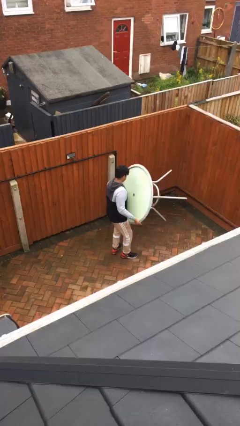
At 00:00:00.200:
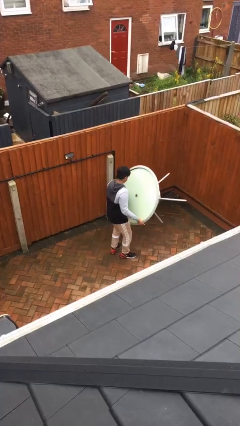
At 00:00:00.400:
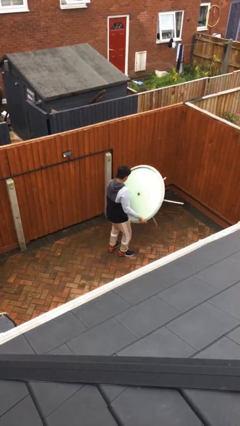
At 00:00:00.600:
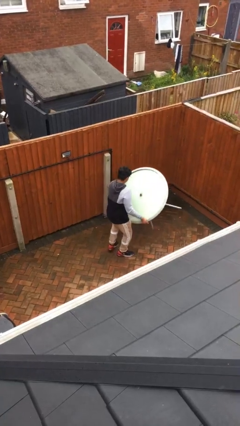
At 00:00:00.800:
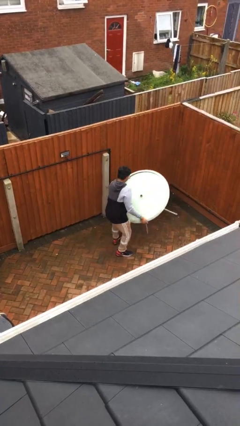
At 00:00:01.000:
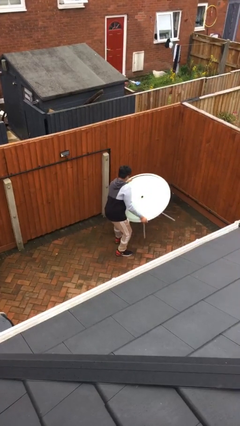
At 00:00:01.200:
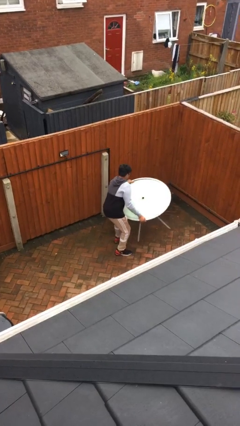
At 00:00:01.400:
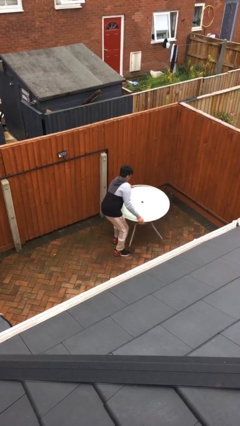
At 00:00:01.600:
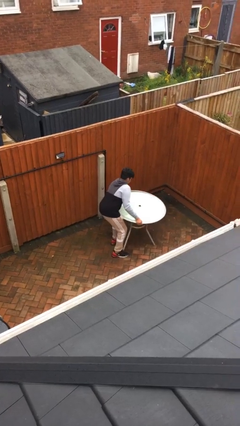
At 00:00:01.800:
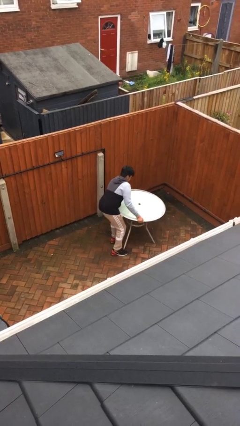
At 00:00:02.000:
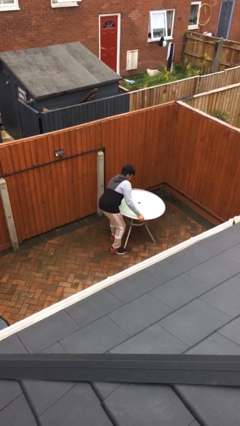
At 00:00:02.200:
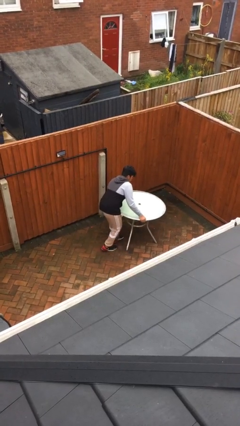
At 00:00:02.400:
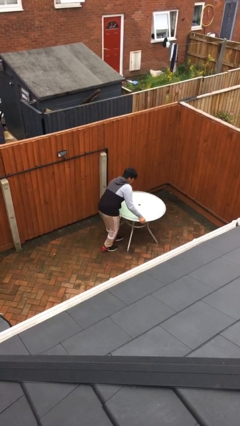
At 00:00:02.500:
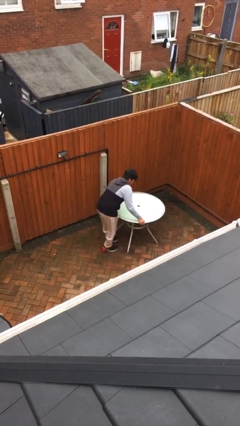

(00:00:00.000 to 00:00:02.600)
person puts down object on floor

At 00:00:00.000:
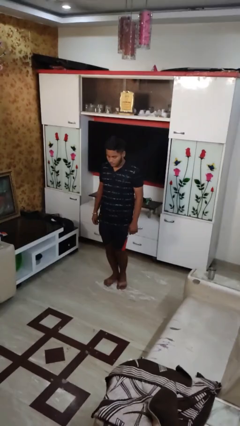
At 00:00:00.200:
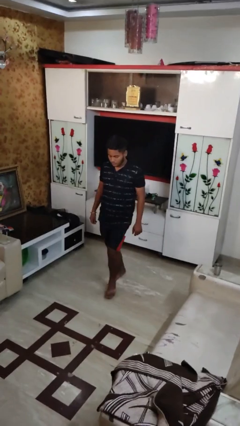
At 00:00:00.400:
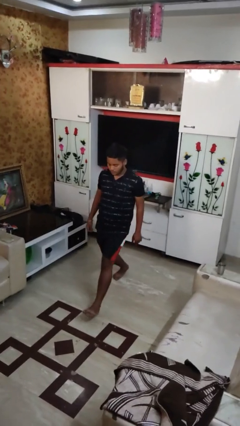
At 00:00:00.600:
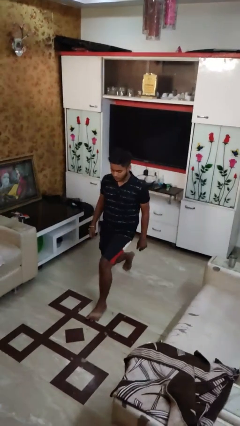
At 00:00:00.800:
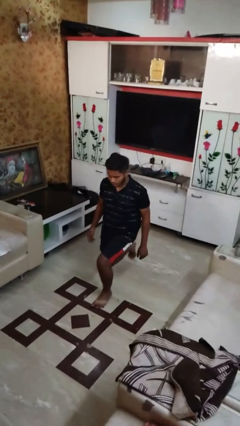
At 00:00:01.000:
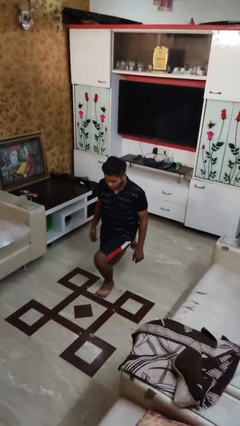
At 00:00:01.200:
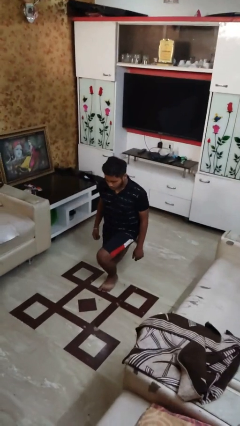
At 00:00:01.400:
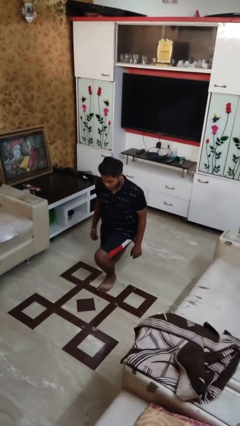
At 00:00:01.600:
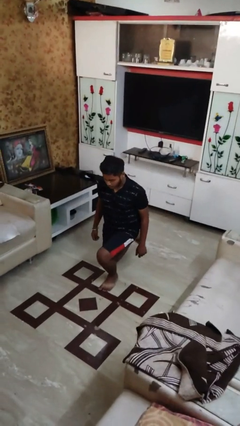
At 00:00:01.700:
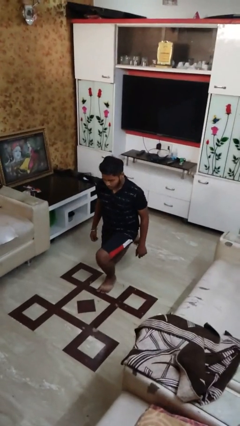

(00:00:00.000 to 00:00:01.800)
person exercises with lunges

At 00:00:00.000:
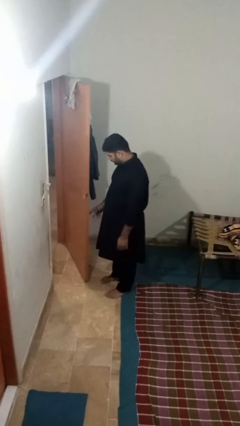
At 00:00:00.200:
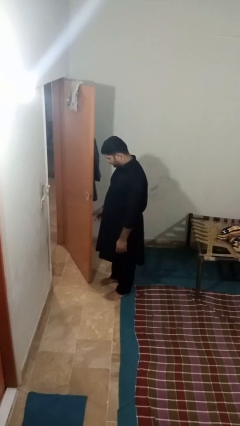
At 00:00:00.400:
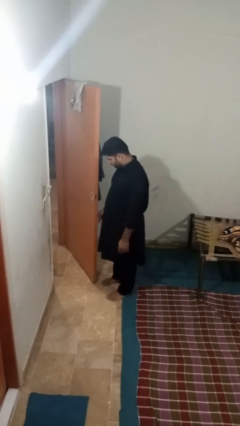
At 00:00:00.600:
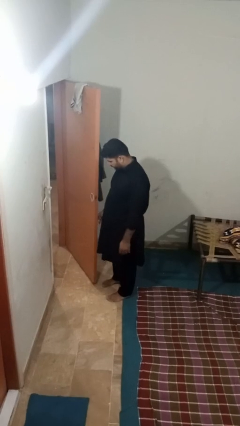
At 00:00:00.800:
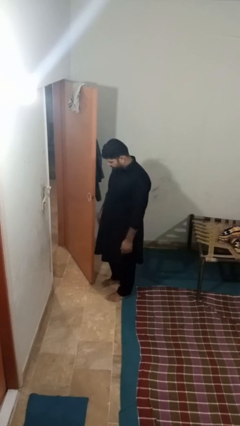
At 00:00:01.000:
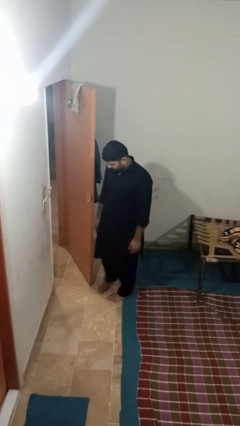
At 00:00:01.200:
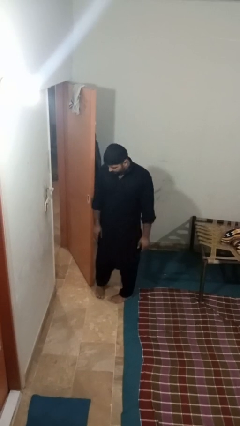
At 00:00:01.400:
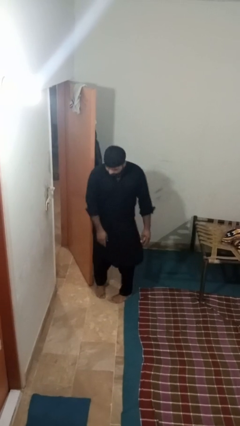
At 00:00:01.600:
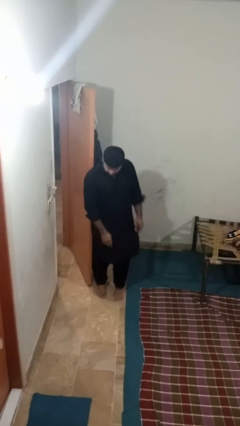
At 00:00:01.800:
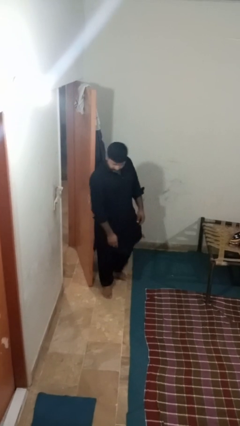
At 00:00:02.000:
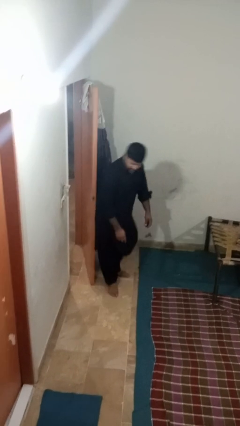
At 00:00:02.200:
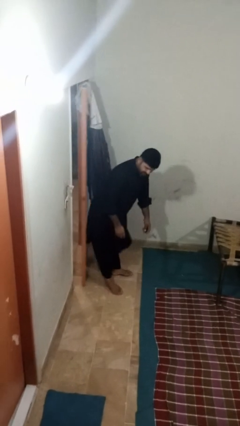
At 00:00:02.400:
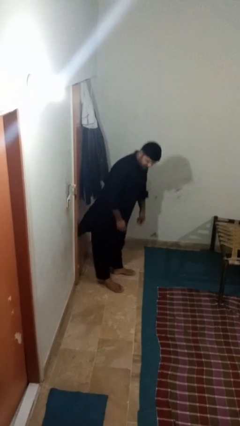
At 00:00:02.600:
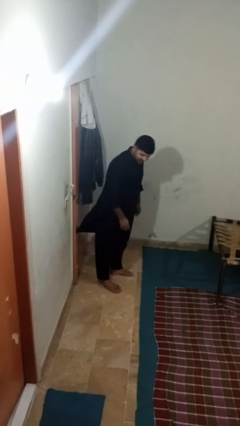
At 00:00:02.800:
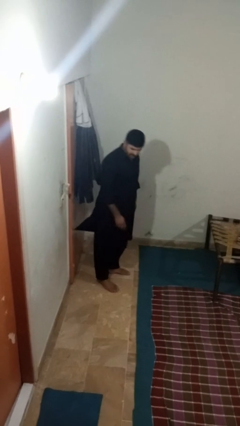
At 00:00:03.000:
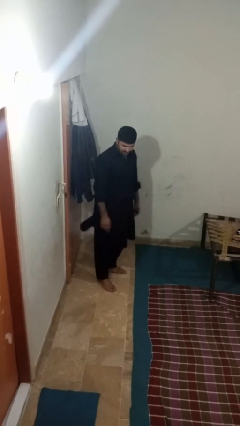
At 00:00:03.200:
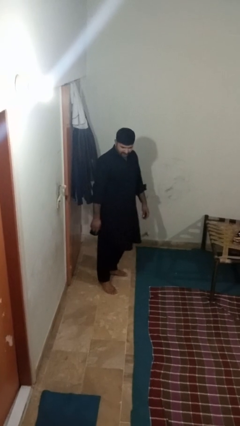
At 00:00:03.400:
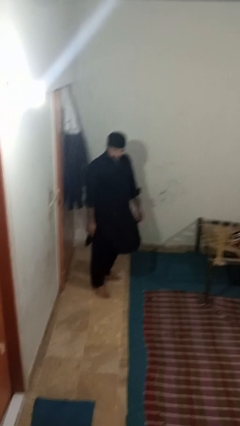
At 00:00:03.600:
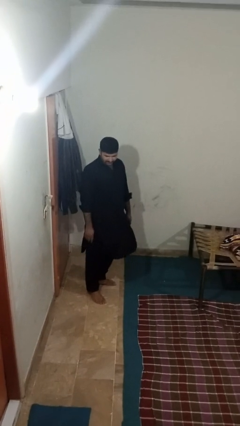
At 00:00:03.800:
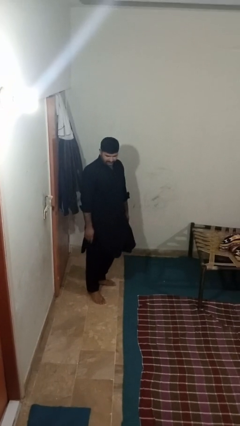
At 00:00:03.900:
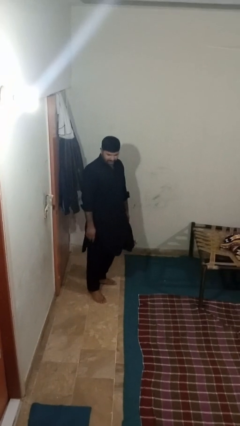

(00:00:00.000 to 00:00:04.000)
person closes door with hip

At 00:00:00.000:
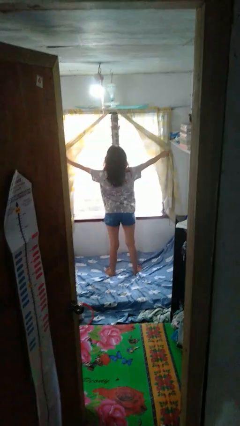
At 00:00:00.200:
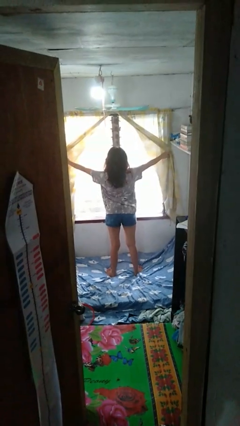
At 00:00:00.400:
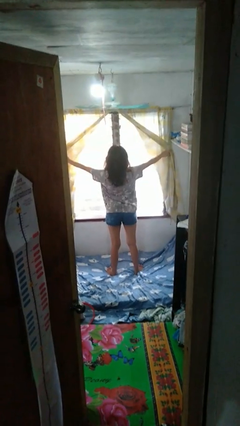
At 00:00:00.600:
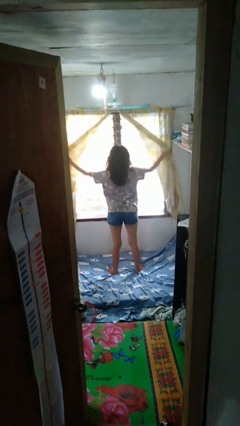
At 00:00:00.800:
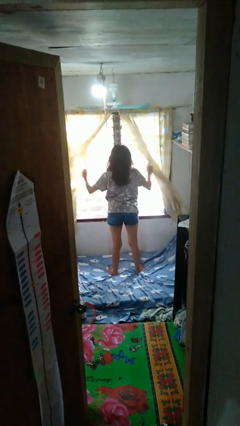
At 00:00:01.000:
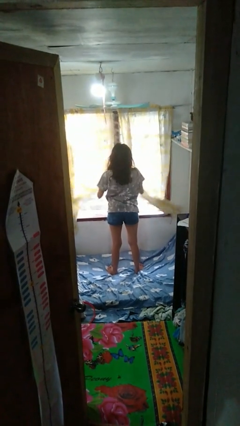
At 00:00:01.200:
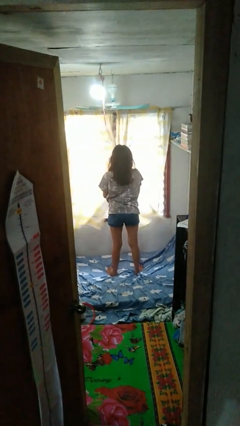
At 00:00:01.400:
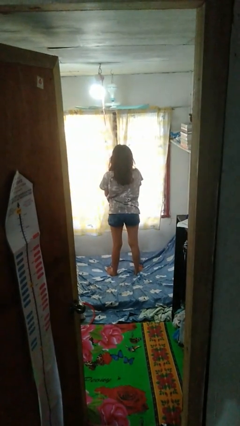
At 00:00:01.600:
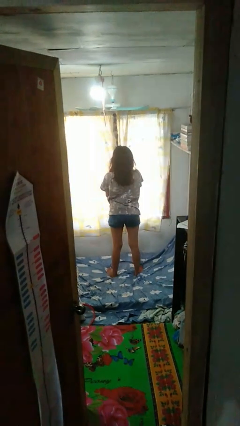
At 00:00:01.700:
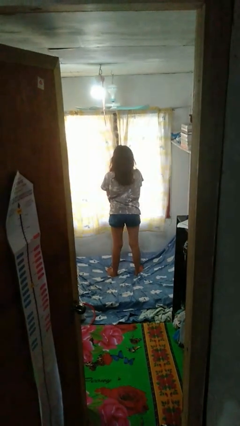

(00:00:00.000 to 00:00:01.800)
person closes curtains

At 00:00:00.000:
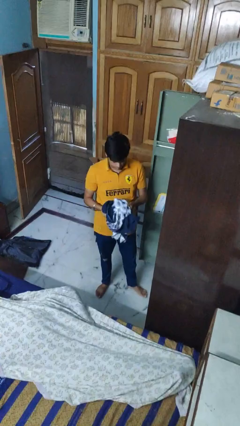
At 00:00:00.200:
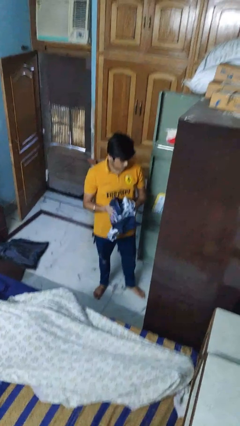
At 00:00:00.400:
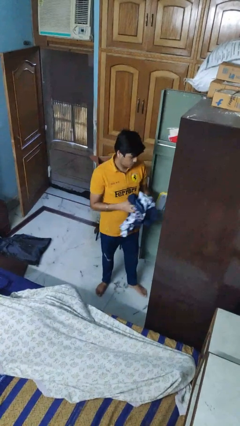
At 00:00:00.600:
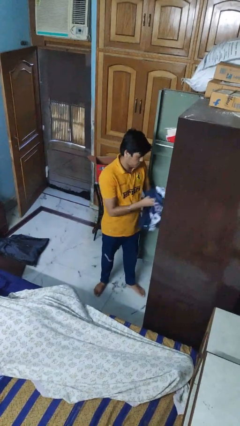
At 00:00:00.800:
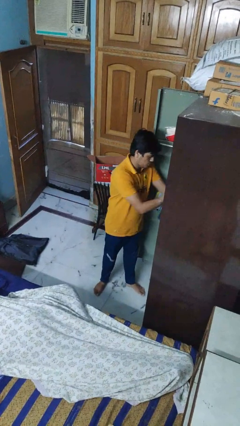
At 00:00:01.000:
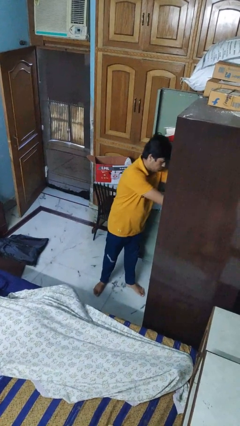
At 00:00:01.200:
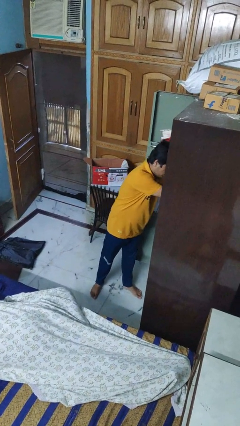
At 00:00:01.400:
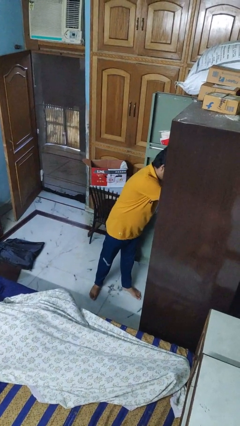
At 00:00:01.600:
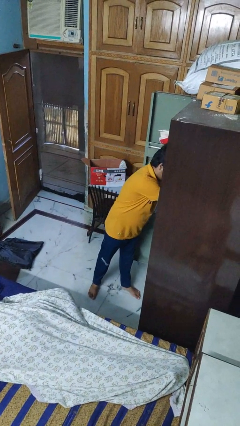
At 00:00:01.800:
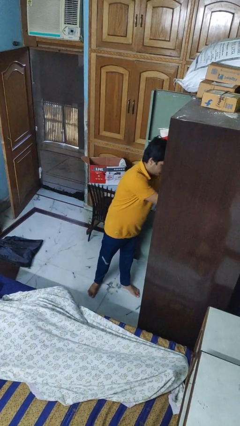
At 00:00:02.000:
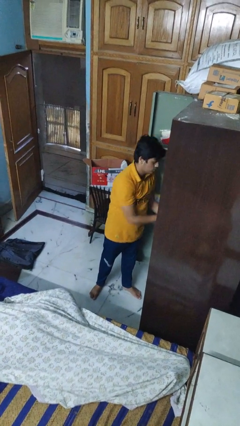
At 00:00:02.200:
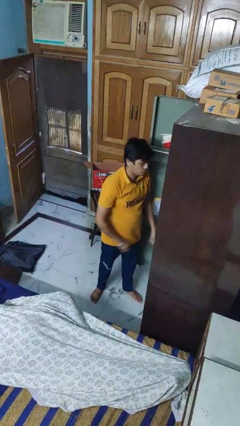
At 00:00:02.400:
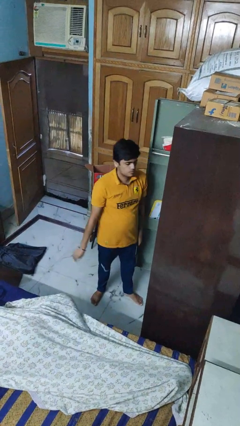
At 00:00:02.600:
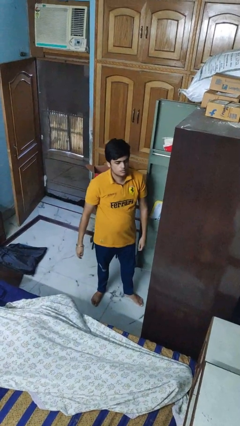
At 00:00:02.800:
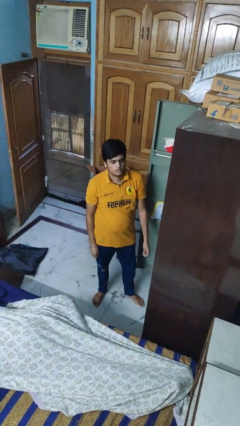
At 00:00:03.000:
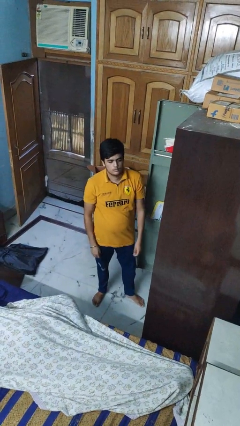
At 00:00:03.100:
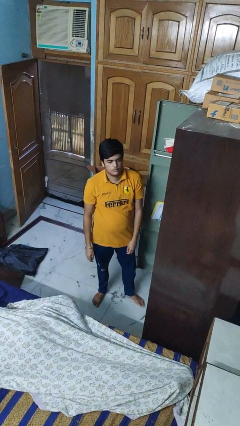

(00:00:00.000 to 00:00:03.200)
person puts clothes into dresser

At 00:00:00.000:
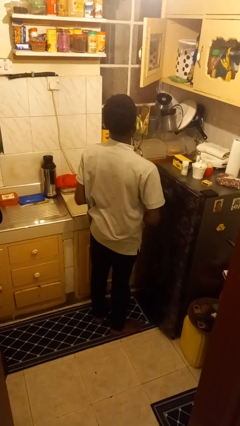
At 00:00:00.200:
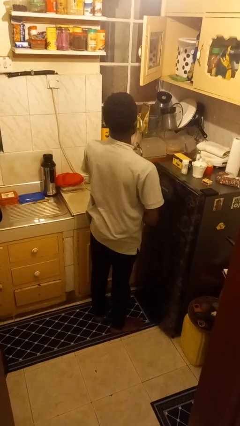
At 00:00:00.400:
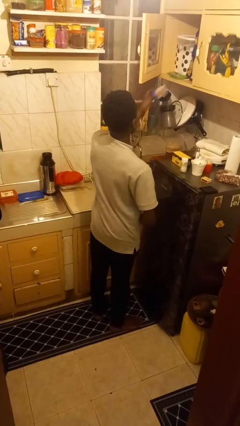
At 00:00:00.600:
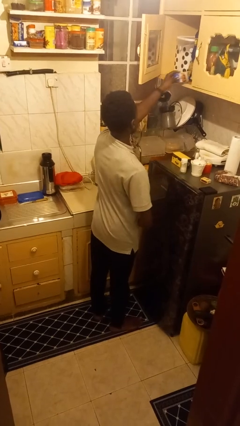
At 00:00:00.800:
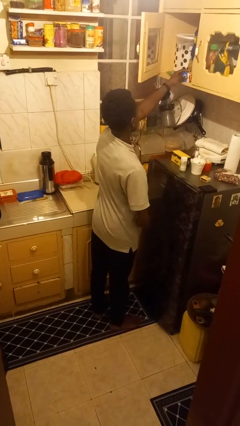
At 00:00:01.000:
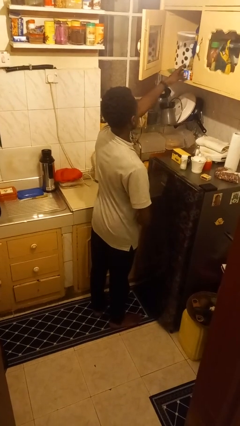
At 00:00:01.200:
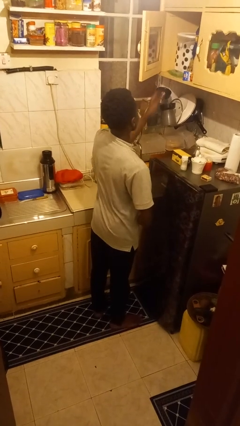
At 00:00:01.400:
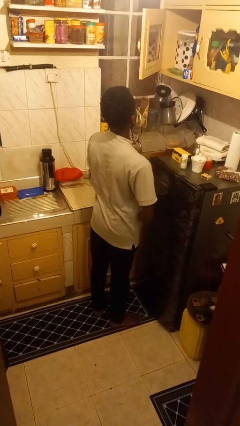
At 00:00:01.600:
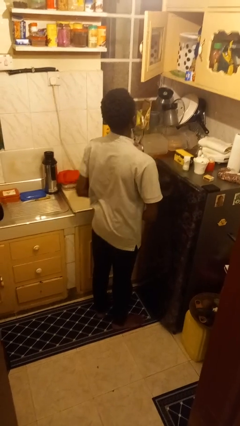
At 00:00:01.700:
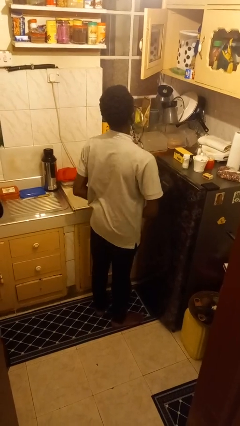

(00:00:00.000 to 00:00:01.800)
person puts down object into cabinet

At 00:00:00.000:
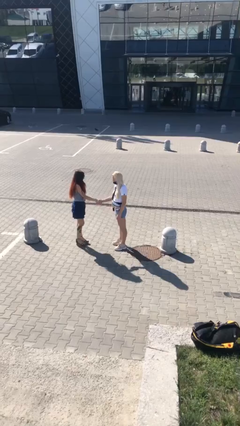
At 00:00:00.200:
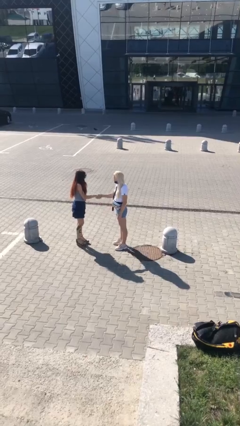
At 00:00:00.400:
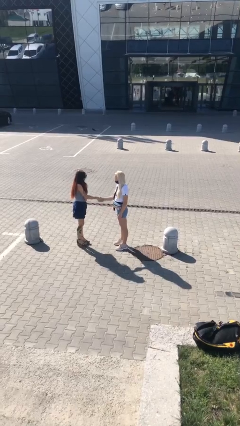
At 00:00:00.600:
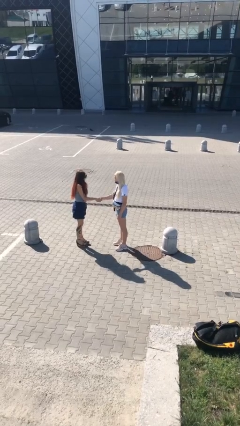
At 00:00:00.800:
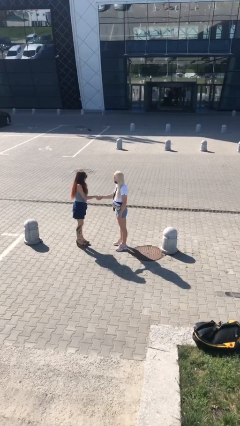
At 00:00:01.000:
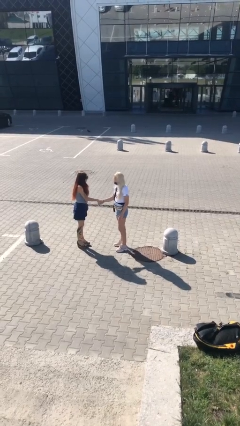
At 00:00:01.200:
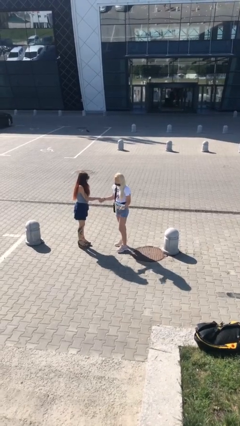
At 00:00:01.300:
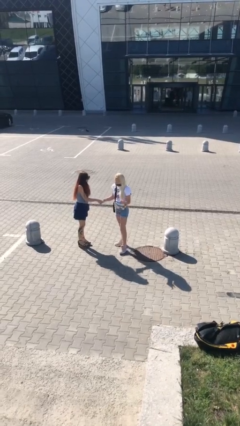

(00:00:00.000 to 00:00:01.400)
person shakes hand
